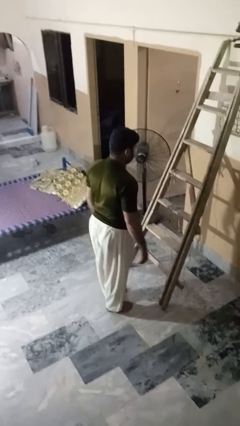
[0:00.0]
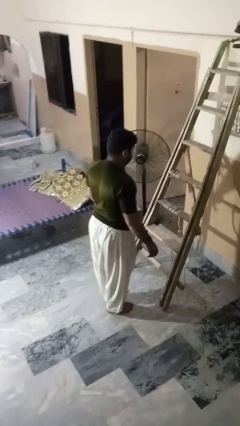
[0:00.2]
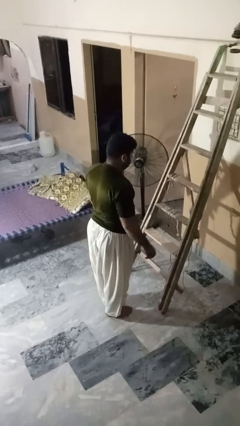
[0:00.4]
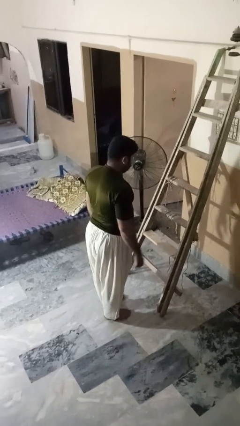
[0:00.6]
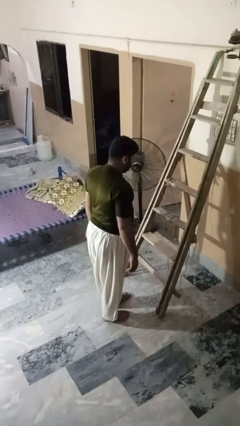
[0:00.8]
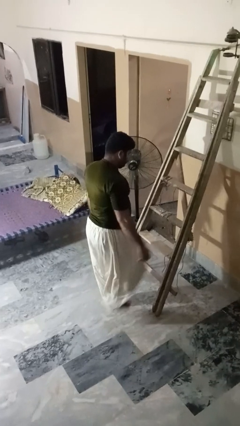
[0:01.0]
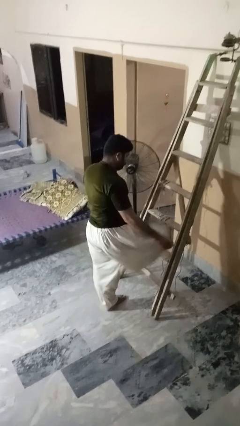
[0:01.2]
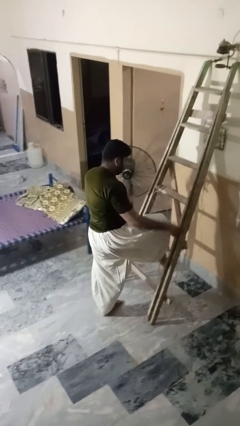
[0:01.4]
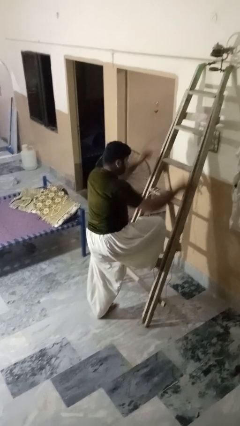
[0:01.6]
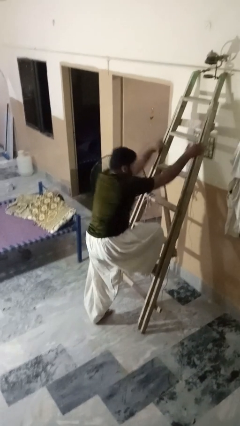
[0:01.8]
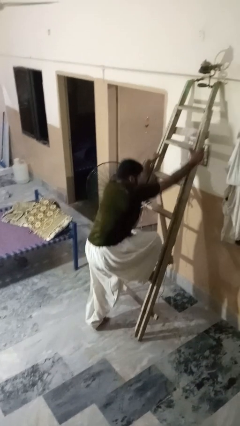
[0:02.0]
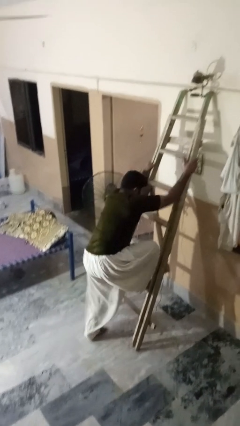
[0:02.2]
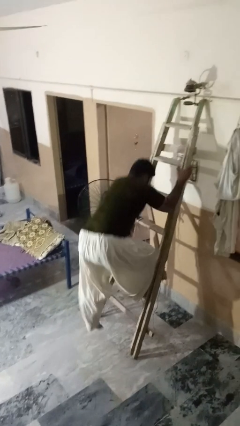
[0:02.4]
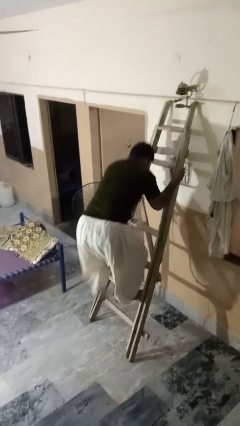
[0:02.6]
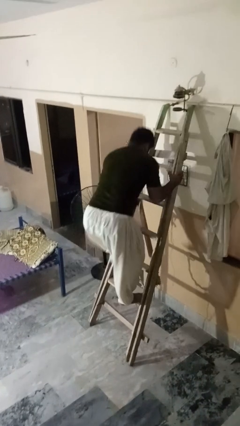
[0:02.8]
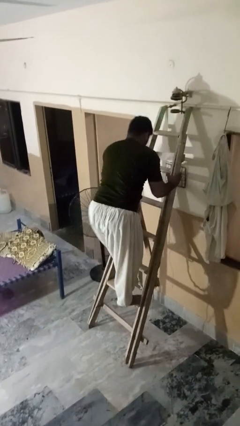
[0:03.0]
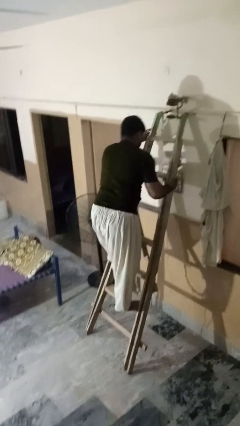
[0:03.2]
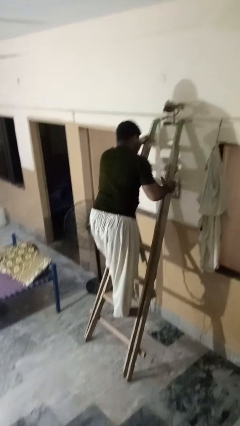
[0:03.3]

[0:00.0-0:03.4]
person climbs up ladder

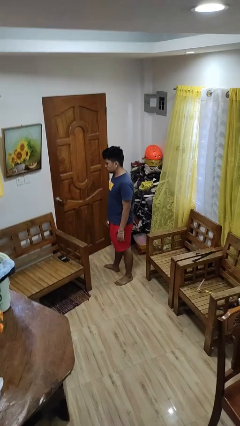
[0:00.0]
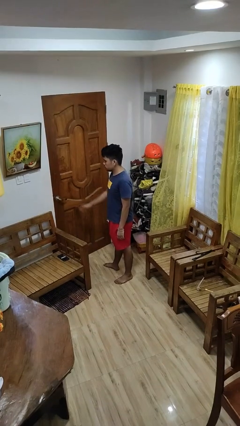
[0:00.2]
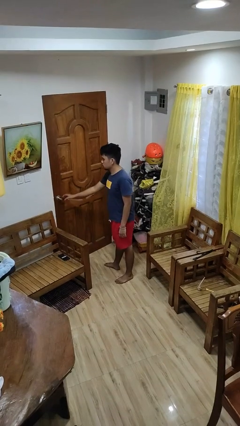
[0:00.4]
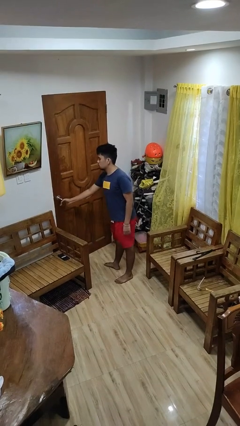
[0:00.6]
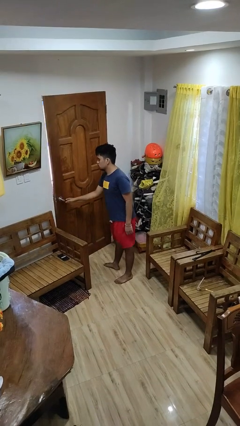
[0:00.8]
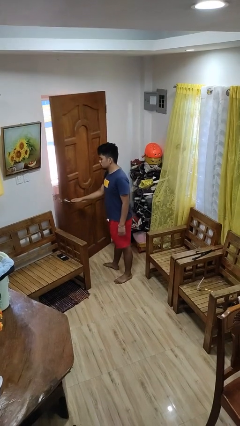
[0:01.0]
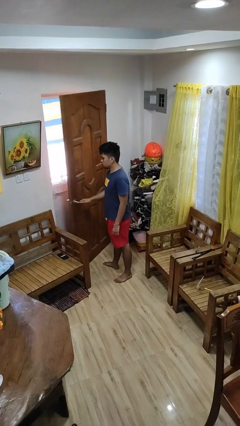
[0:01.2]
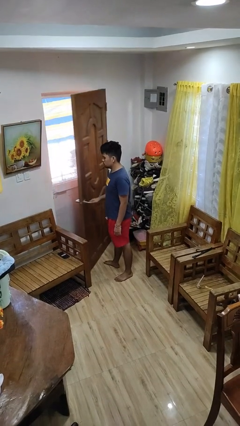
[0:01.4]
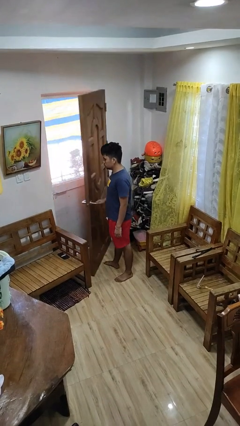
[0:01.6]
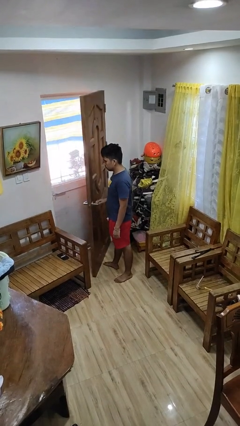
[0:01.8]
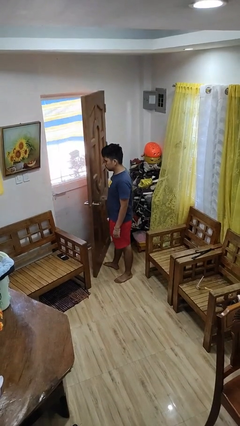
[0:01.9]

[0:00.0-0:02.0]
person opens facility door

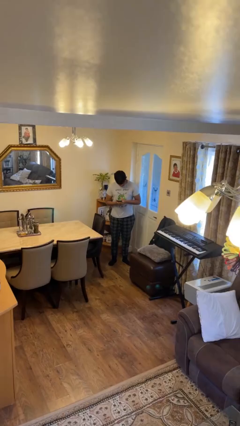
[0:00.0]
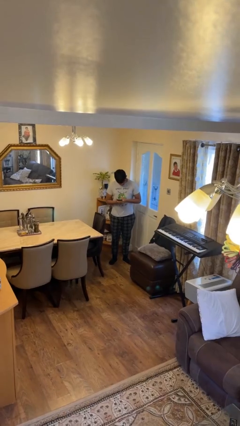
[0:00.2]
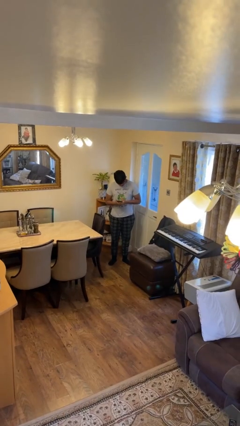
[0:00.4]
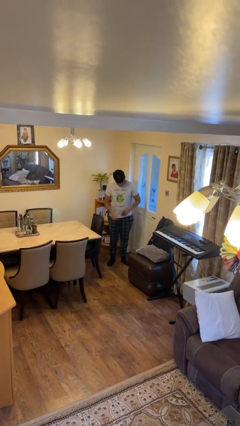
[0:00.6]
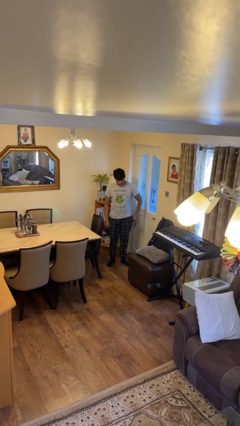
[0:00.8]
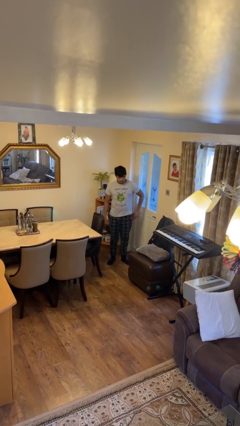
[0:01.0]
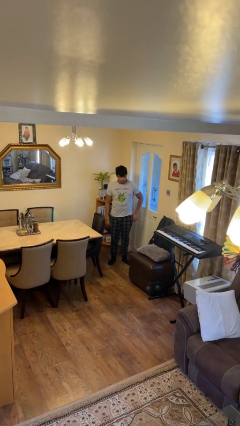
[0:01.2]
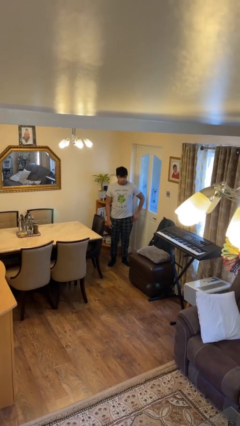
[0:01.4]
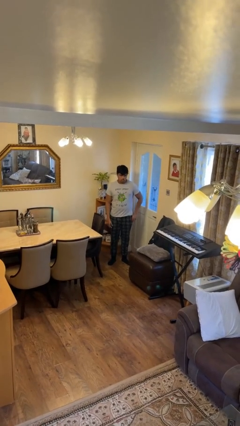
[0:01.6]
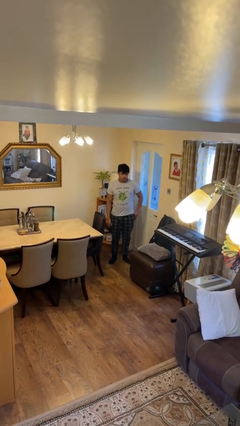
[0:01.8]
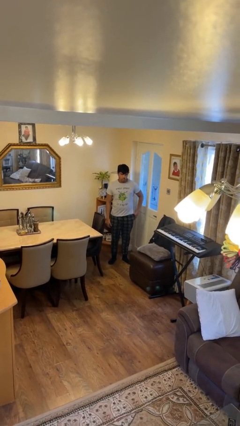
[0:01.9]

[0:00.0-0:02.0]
person puts phone into pocket

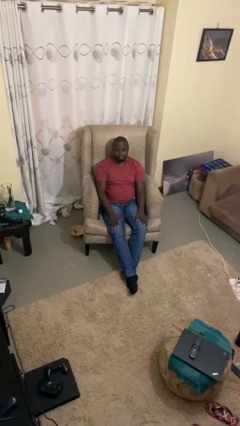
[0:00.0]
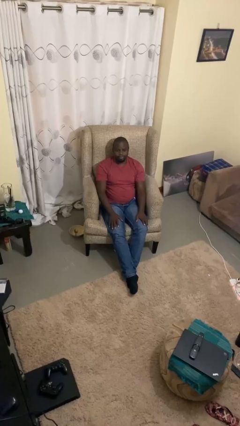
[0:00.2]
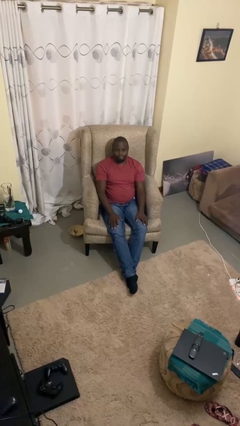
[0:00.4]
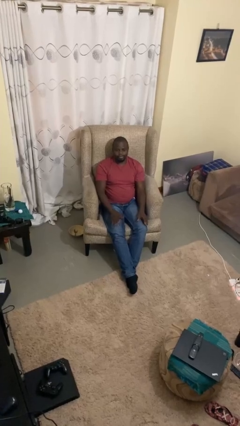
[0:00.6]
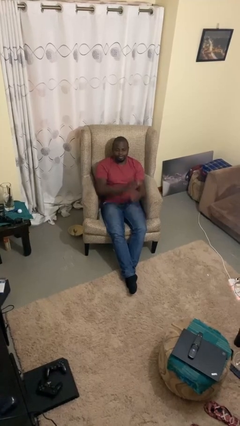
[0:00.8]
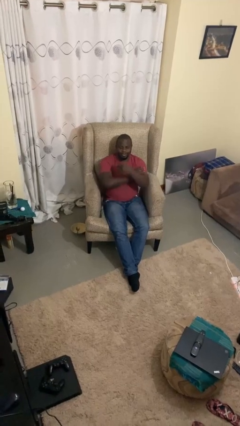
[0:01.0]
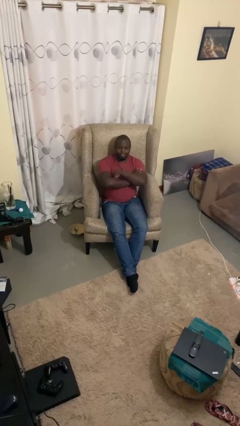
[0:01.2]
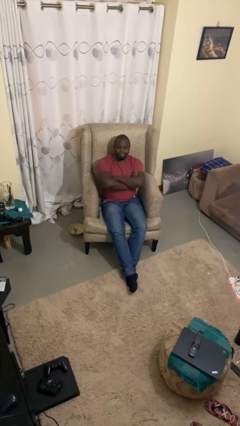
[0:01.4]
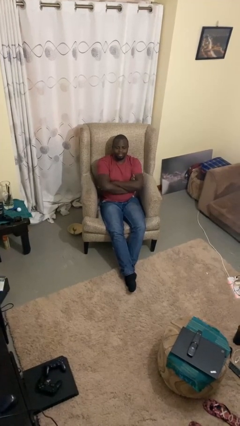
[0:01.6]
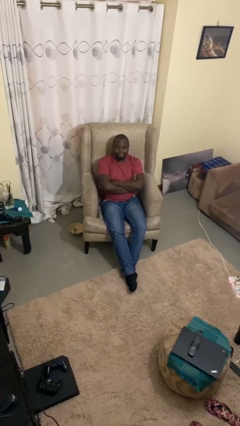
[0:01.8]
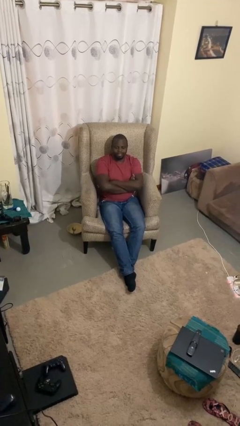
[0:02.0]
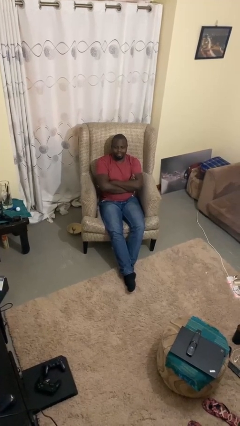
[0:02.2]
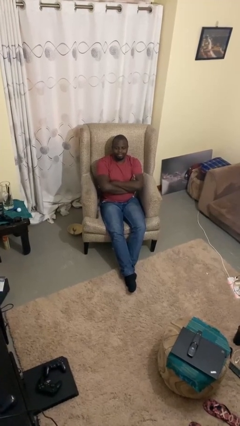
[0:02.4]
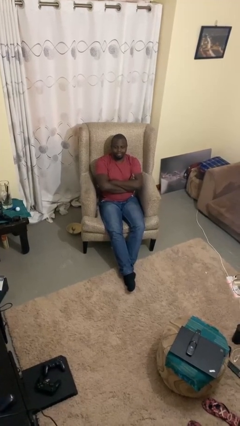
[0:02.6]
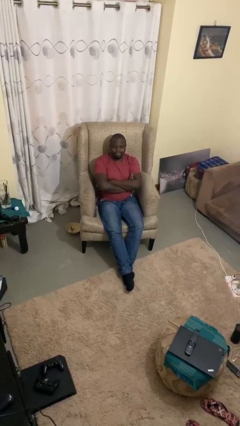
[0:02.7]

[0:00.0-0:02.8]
person crosses arms

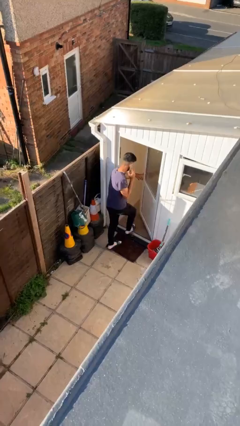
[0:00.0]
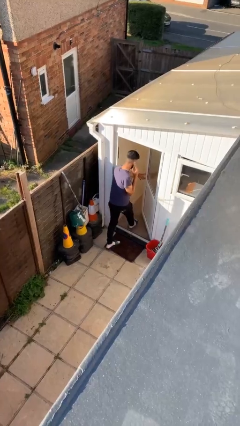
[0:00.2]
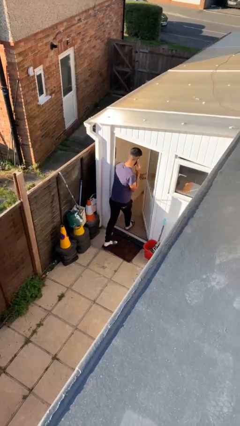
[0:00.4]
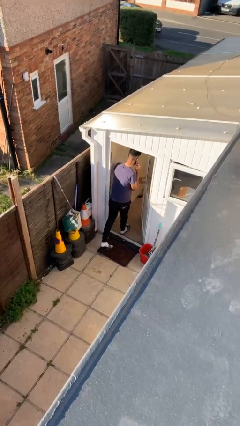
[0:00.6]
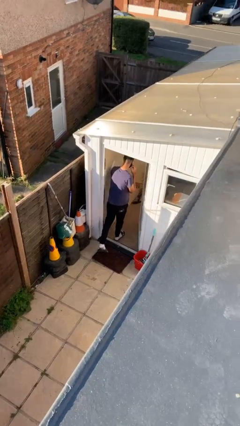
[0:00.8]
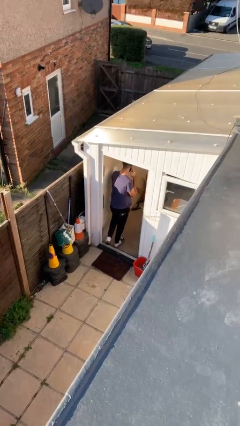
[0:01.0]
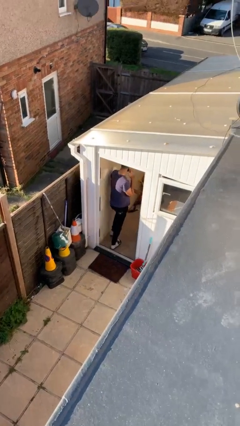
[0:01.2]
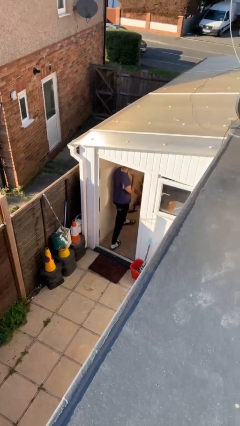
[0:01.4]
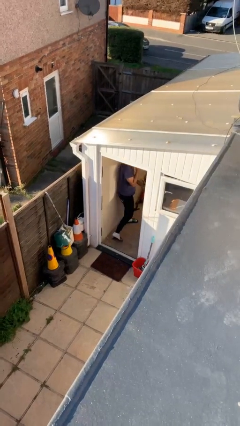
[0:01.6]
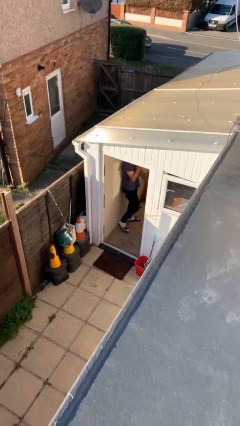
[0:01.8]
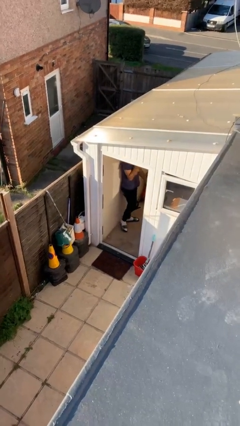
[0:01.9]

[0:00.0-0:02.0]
person exits scene through structure

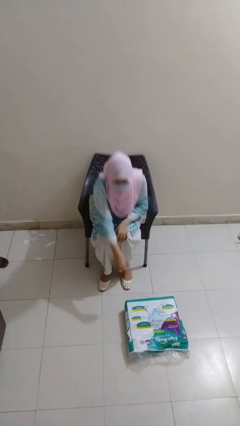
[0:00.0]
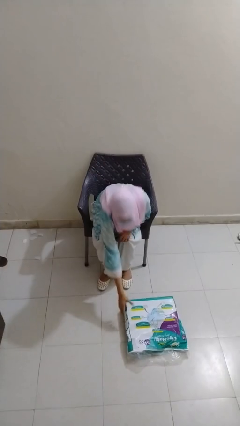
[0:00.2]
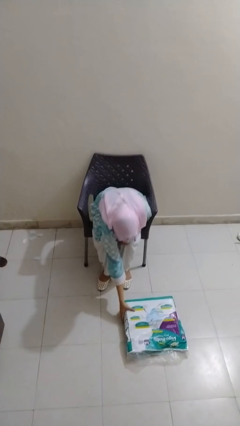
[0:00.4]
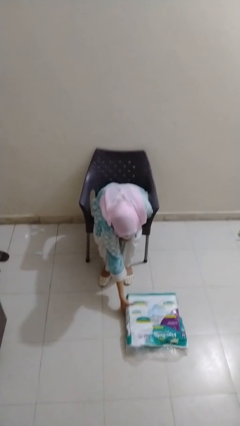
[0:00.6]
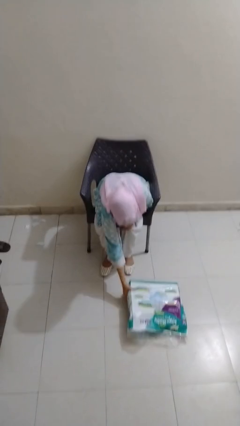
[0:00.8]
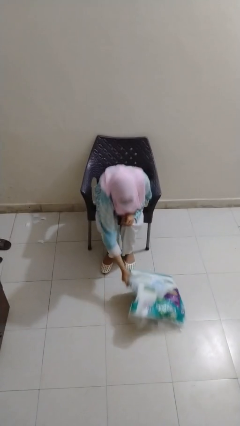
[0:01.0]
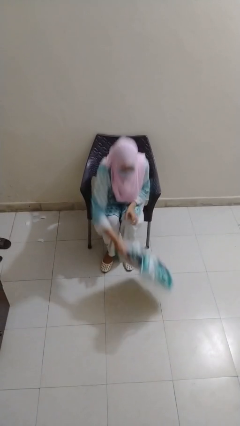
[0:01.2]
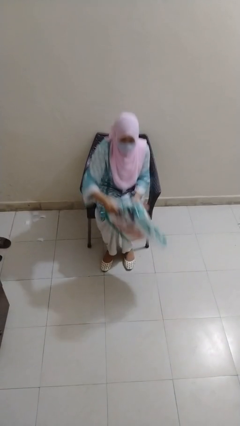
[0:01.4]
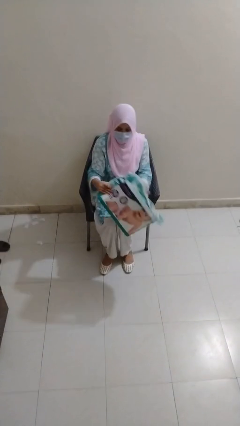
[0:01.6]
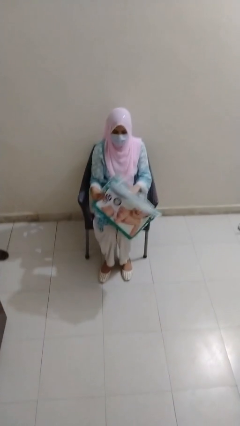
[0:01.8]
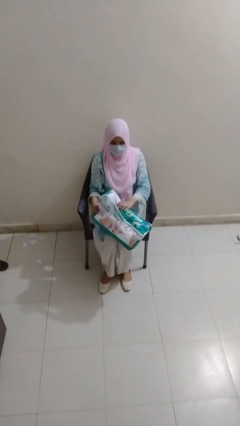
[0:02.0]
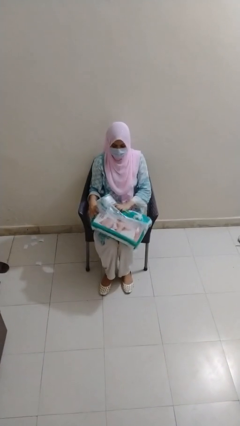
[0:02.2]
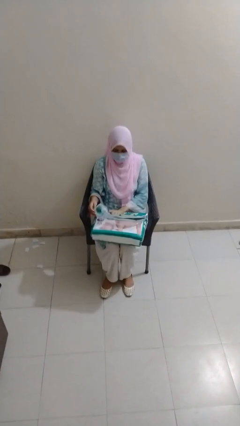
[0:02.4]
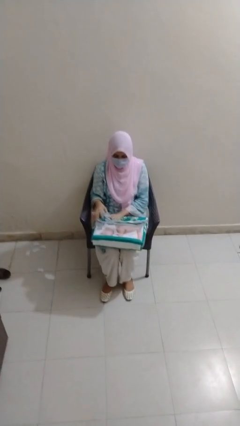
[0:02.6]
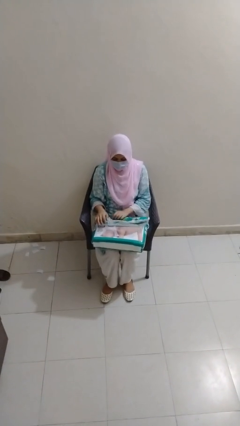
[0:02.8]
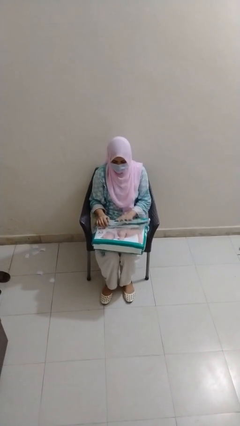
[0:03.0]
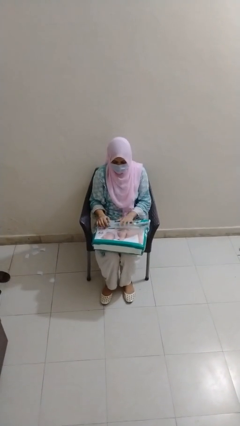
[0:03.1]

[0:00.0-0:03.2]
person picks up object from floor

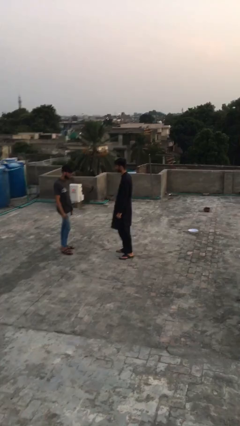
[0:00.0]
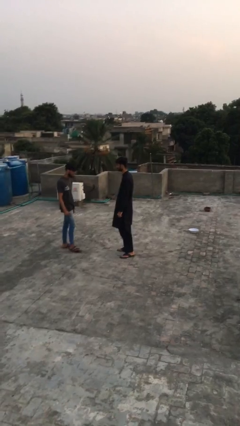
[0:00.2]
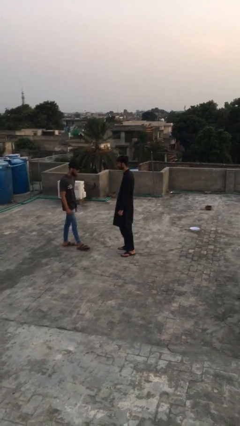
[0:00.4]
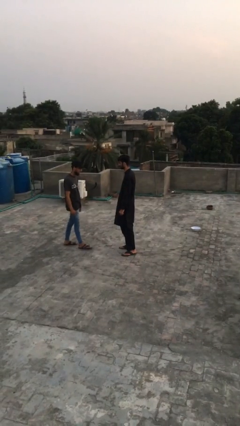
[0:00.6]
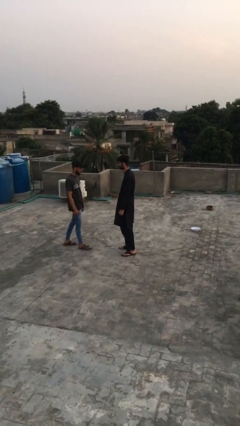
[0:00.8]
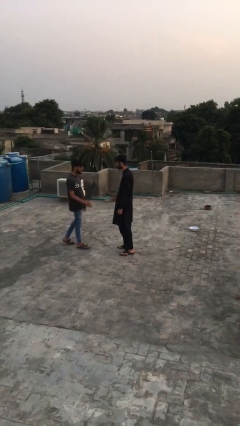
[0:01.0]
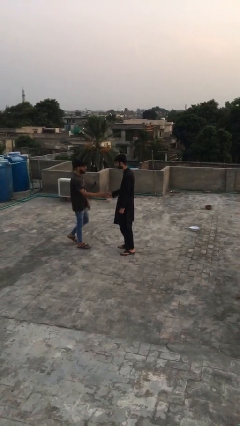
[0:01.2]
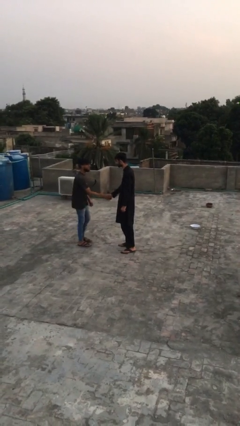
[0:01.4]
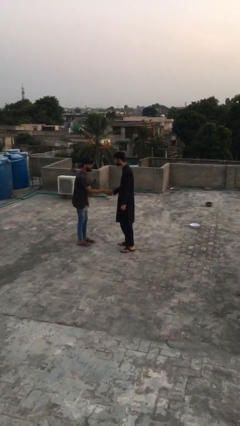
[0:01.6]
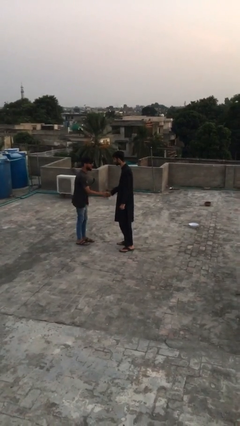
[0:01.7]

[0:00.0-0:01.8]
person shakes hand
